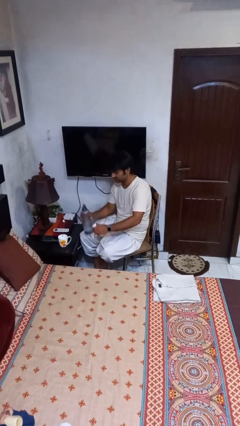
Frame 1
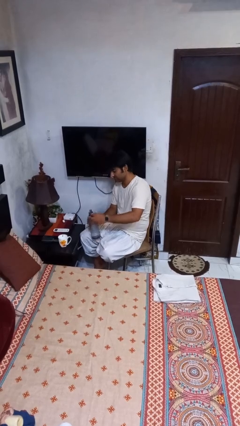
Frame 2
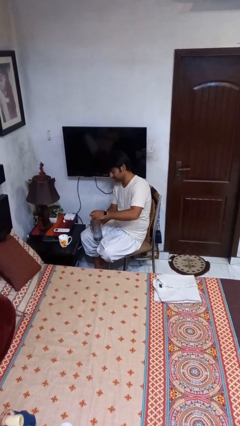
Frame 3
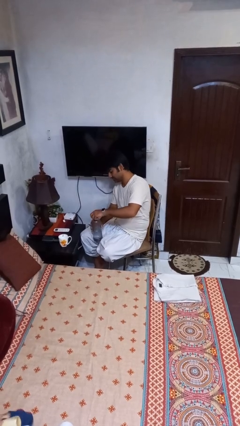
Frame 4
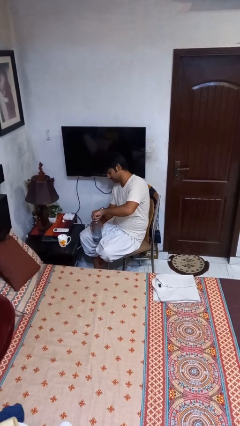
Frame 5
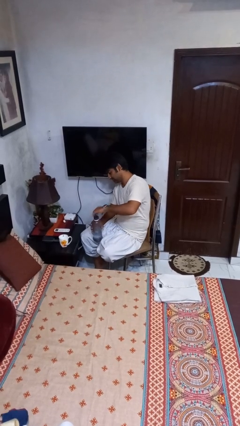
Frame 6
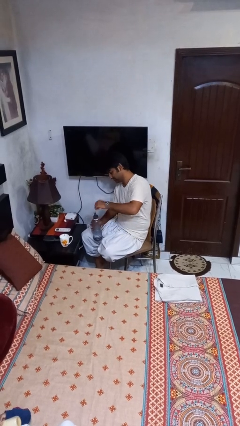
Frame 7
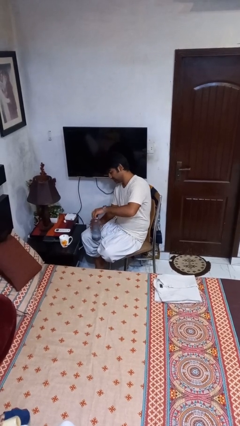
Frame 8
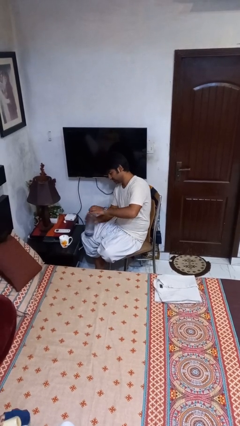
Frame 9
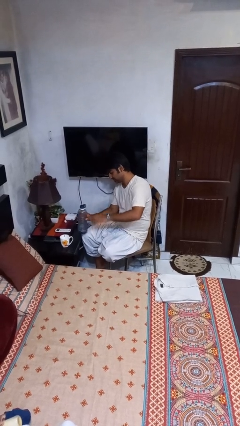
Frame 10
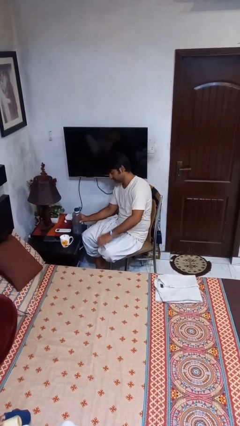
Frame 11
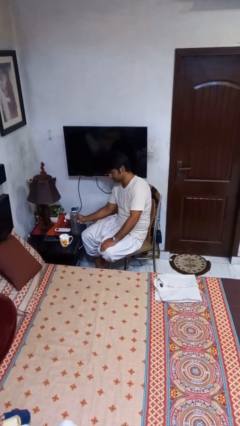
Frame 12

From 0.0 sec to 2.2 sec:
person screws lid to bottle

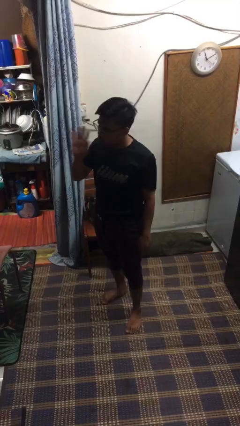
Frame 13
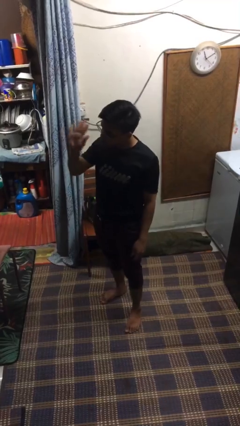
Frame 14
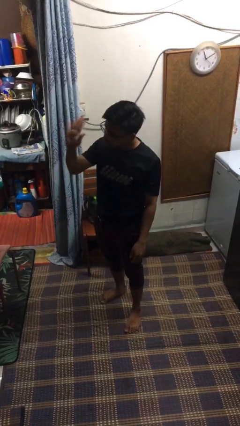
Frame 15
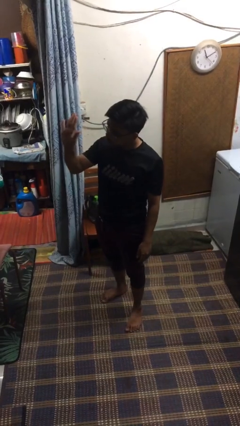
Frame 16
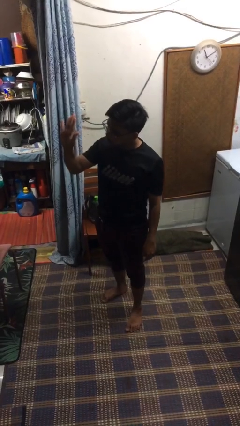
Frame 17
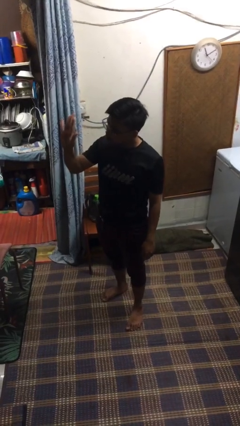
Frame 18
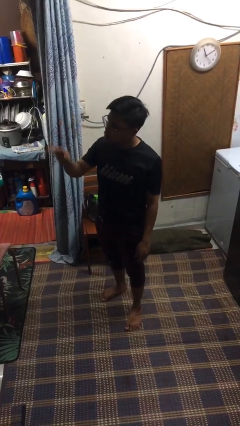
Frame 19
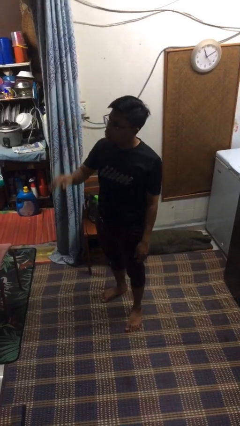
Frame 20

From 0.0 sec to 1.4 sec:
person gestures stop

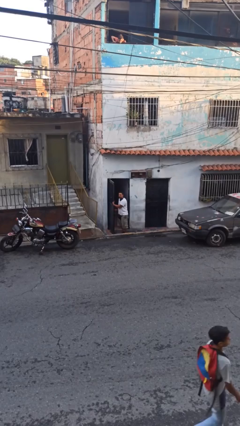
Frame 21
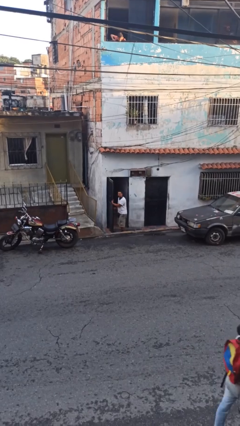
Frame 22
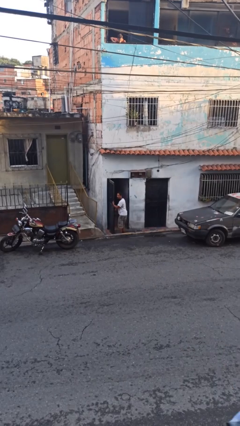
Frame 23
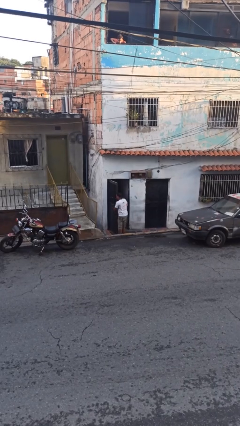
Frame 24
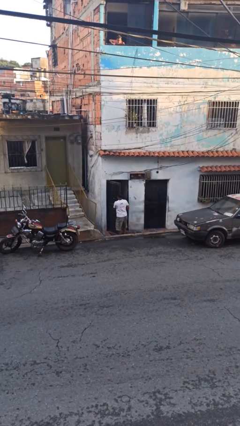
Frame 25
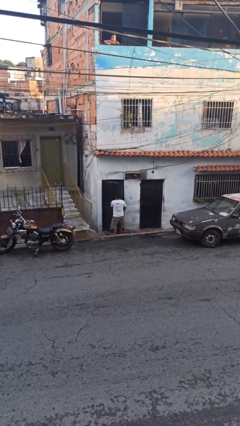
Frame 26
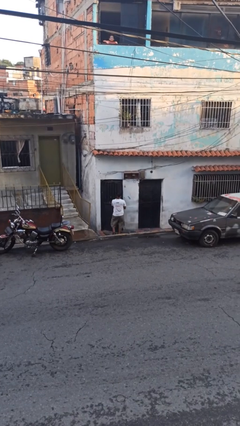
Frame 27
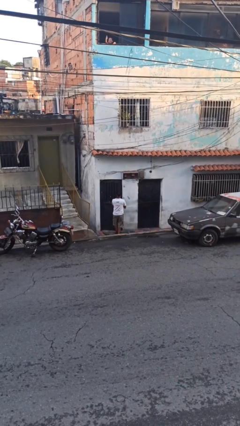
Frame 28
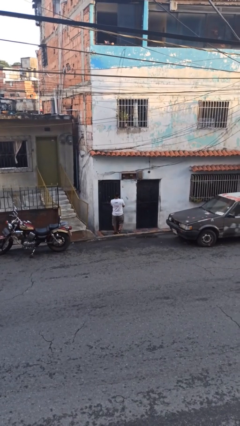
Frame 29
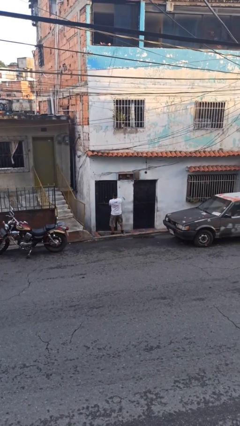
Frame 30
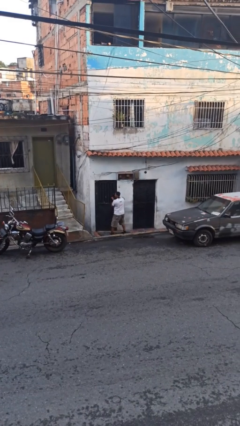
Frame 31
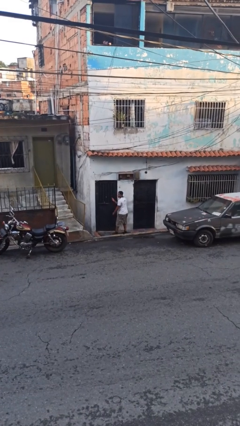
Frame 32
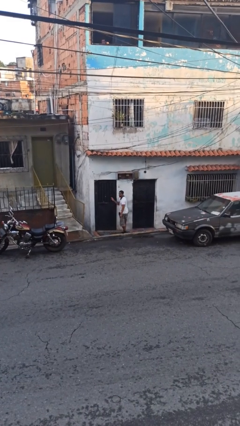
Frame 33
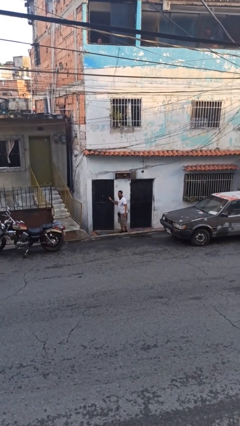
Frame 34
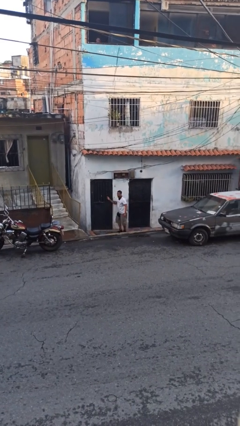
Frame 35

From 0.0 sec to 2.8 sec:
person closes facility door

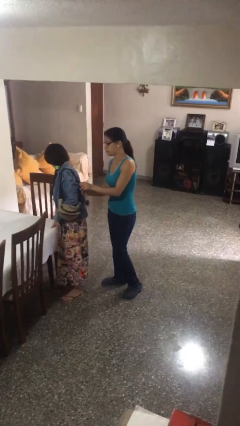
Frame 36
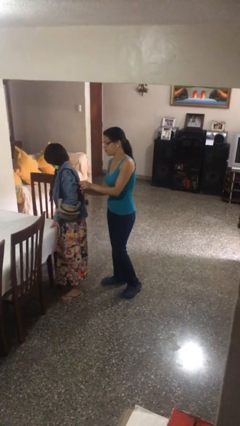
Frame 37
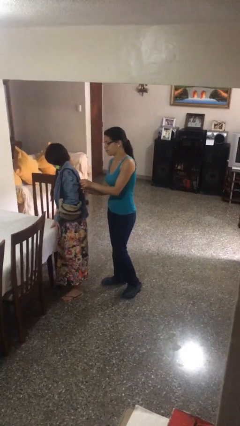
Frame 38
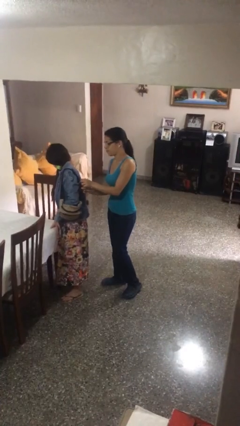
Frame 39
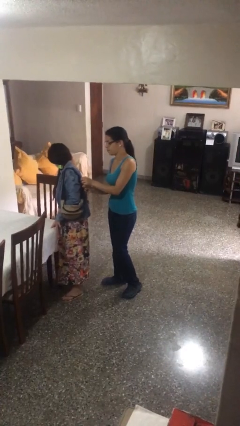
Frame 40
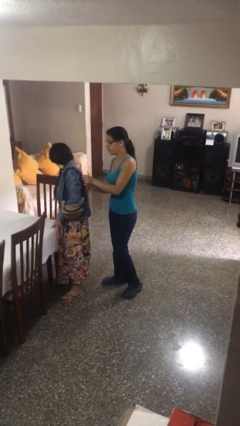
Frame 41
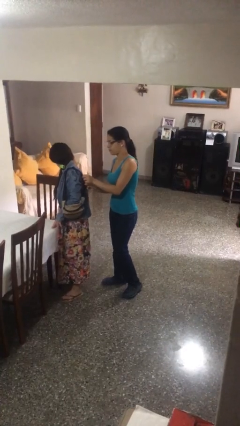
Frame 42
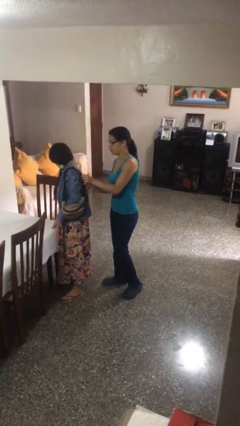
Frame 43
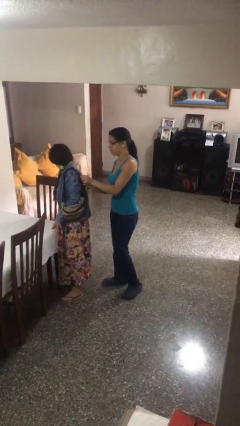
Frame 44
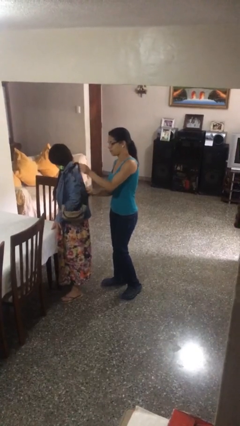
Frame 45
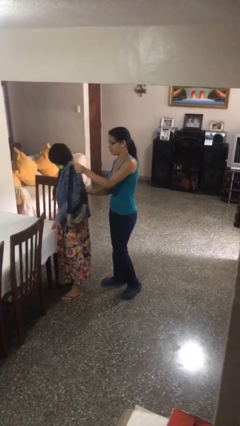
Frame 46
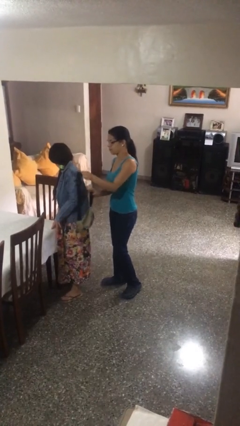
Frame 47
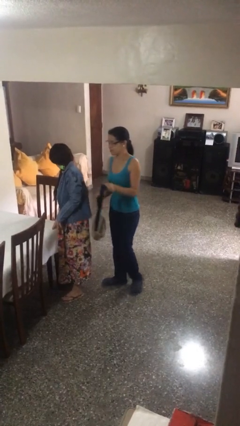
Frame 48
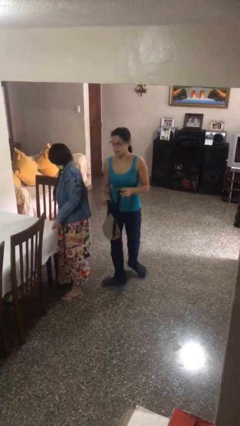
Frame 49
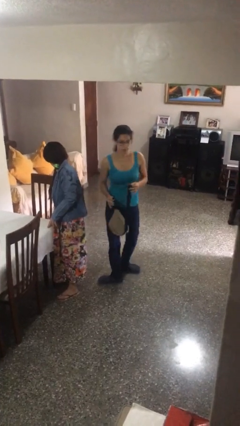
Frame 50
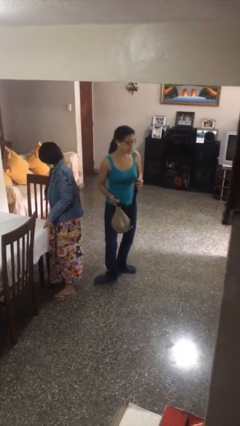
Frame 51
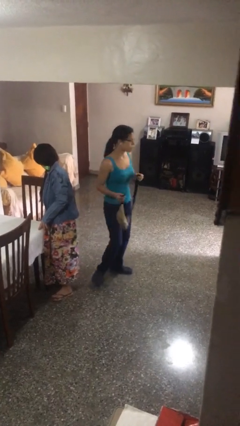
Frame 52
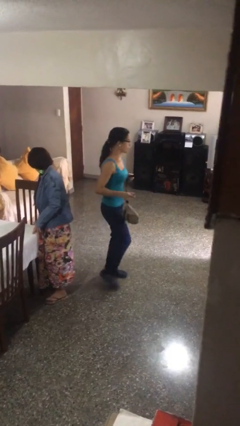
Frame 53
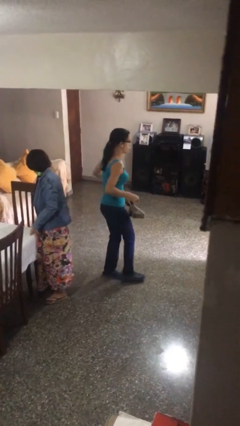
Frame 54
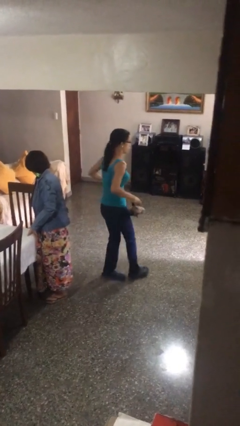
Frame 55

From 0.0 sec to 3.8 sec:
person steals object from person

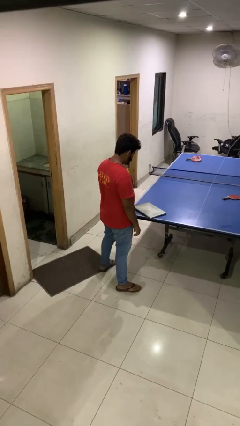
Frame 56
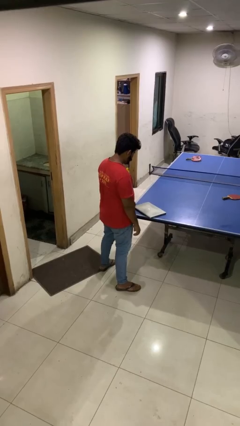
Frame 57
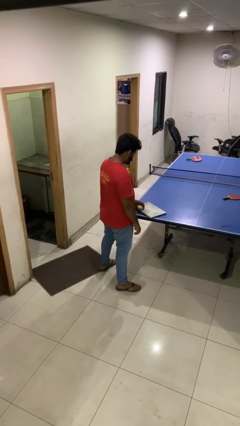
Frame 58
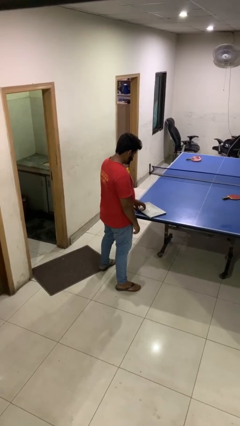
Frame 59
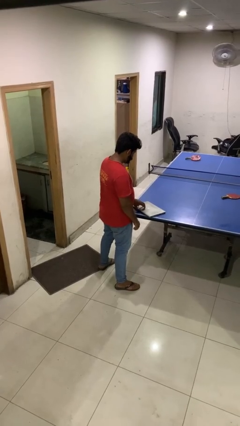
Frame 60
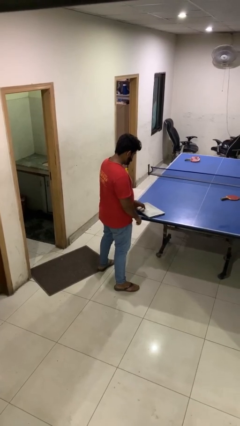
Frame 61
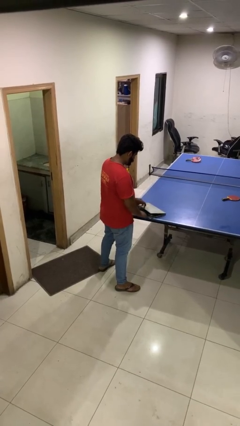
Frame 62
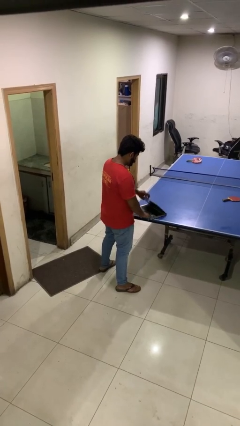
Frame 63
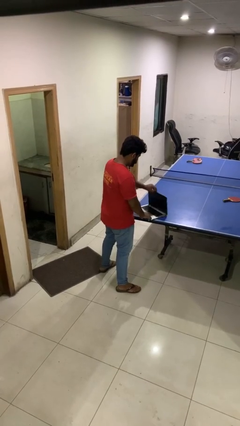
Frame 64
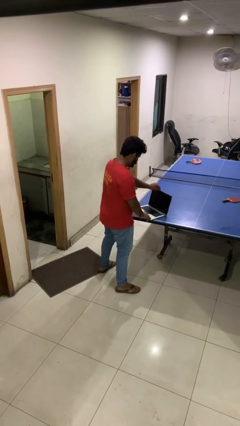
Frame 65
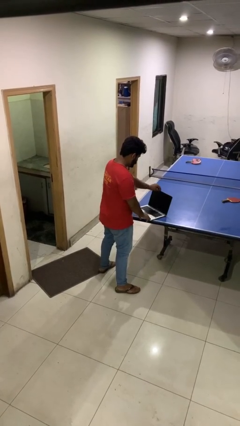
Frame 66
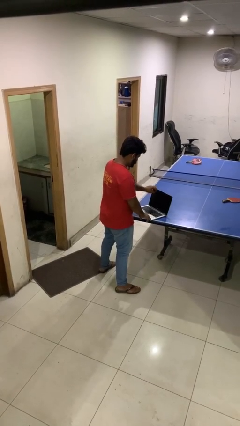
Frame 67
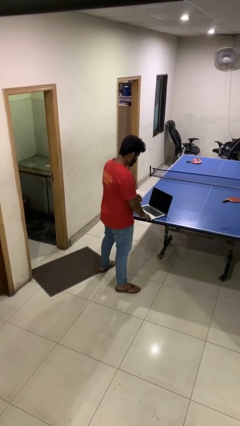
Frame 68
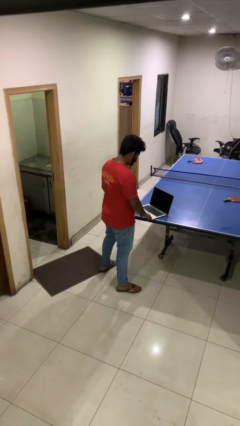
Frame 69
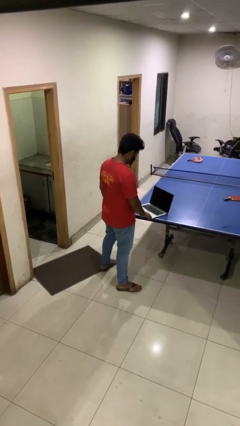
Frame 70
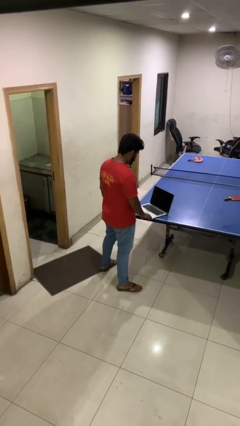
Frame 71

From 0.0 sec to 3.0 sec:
person opens laptop

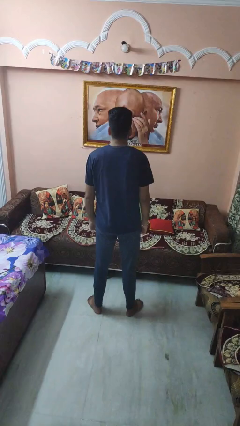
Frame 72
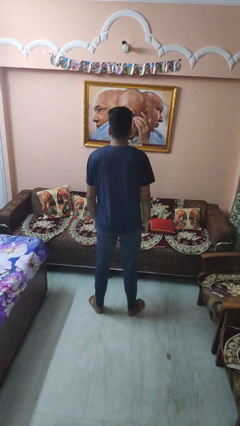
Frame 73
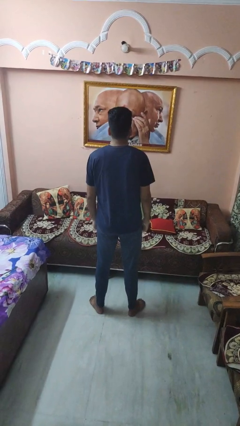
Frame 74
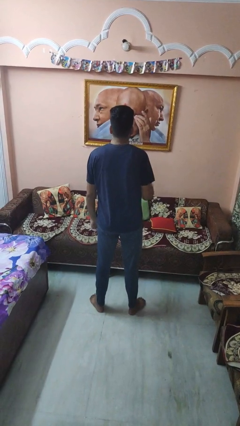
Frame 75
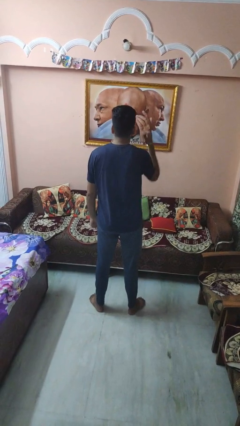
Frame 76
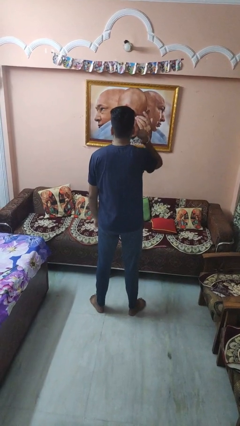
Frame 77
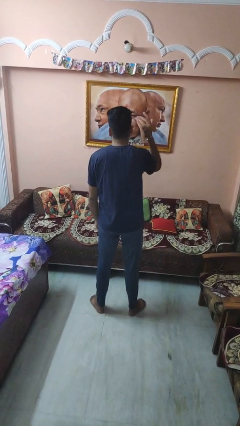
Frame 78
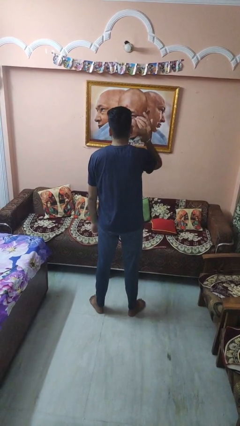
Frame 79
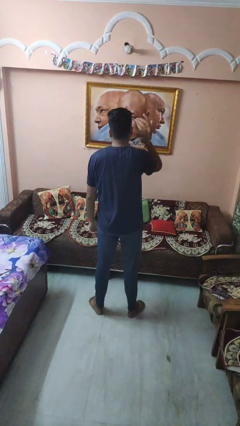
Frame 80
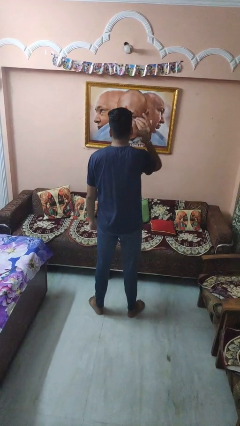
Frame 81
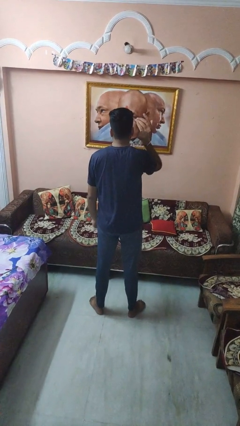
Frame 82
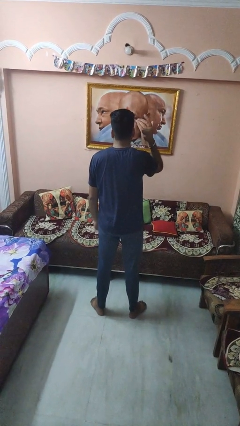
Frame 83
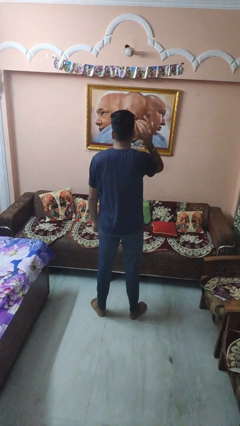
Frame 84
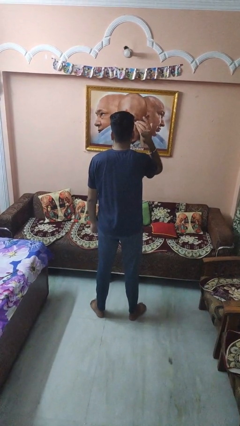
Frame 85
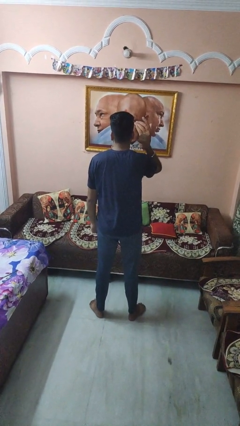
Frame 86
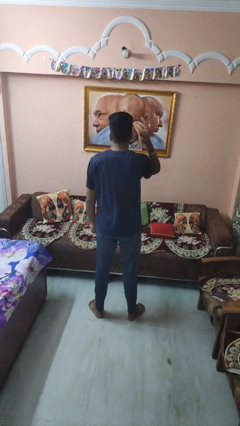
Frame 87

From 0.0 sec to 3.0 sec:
person gestures behind me

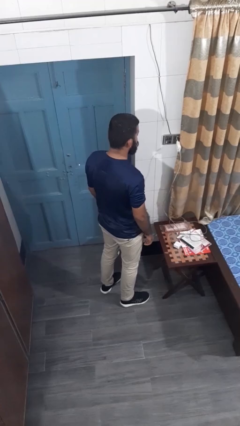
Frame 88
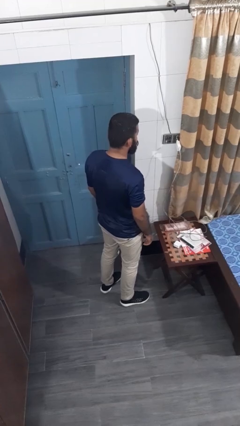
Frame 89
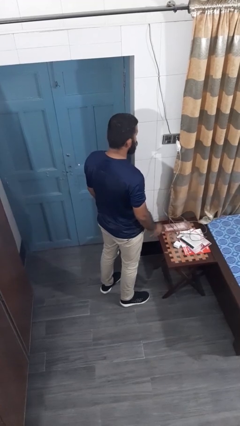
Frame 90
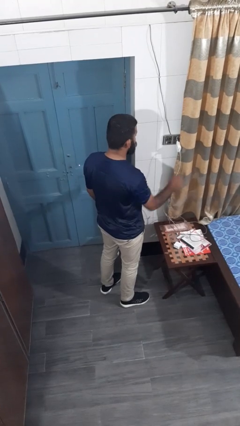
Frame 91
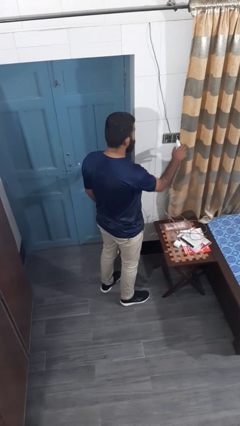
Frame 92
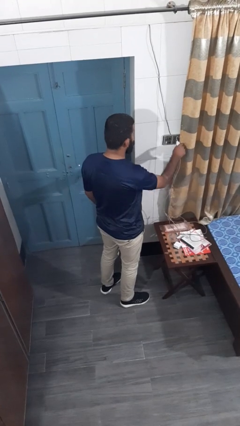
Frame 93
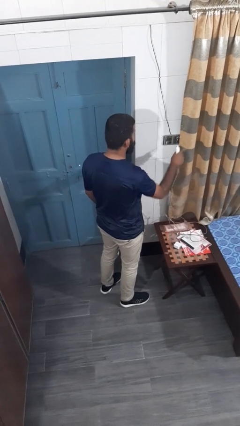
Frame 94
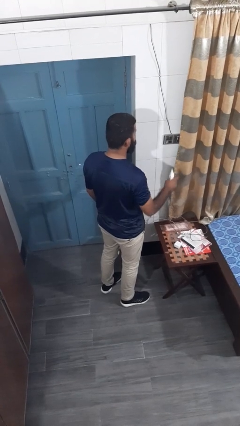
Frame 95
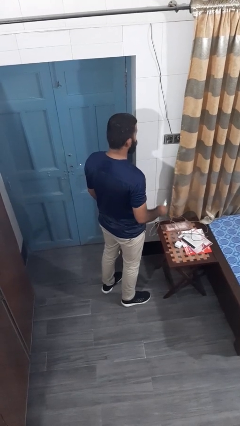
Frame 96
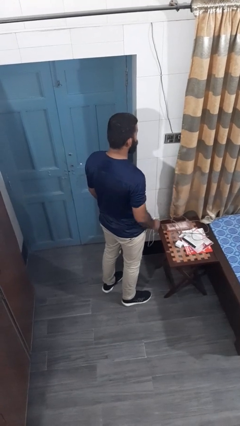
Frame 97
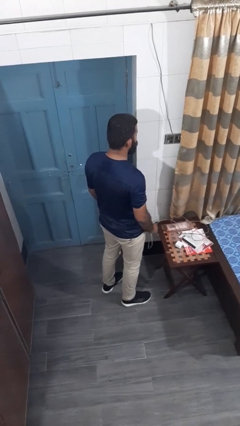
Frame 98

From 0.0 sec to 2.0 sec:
person unplugs from electrical socket
